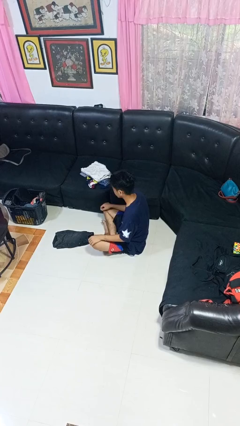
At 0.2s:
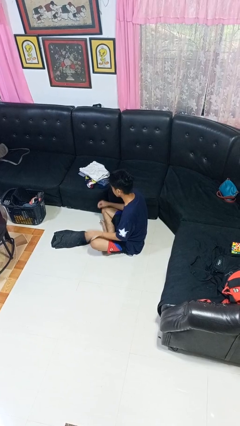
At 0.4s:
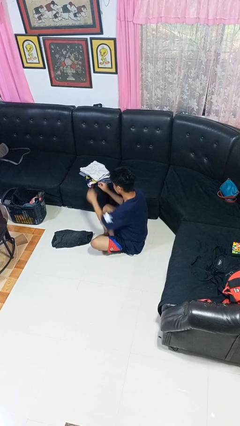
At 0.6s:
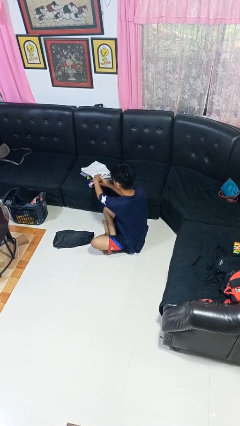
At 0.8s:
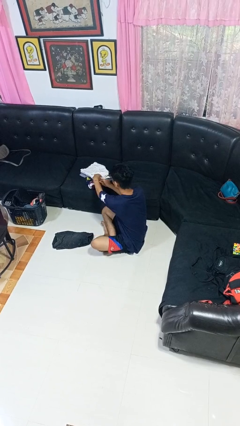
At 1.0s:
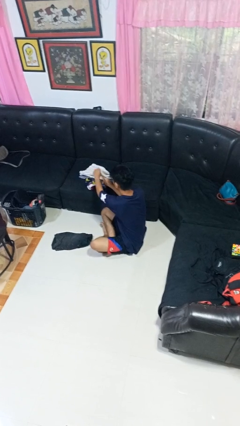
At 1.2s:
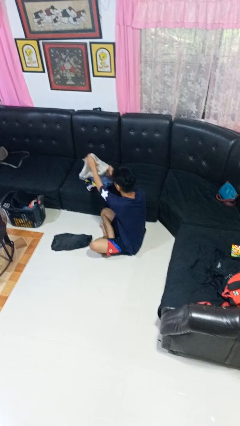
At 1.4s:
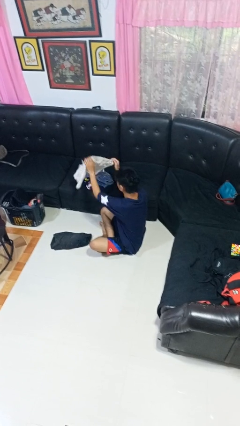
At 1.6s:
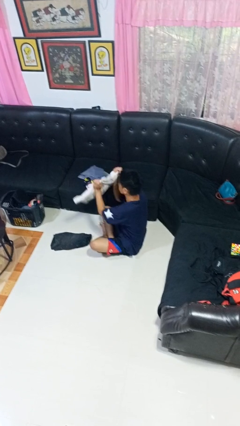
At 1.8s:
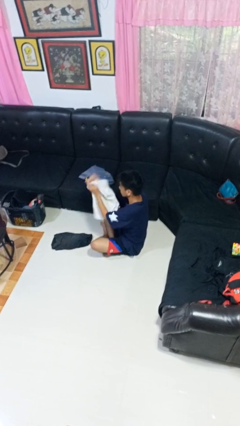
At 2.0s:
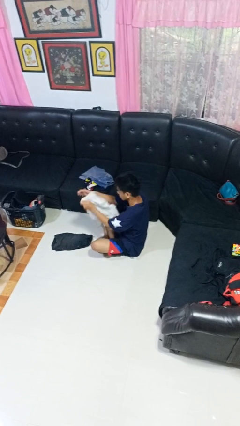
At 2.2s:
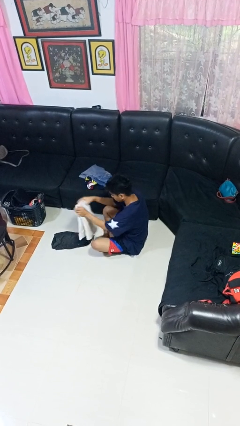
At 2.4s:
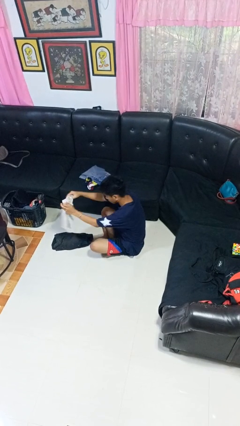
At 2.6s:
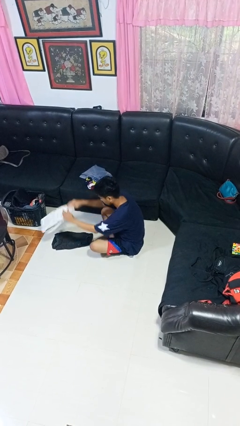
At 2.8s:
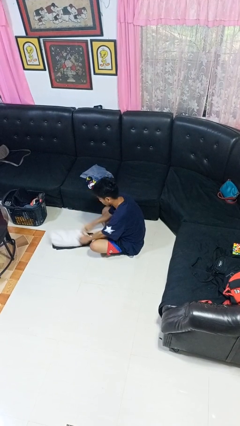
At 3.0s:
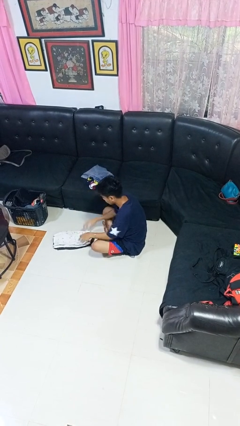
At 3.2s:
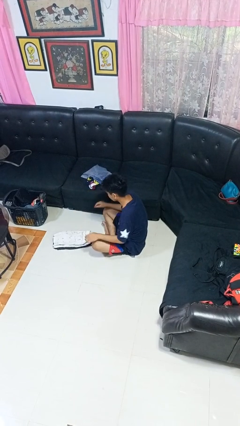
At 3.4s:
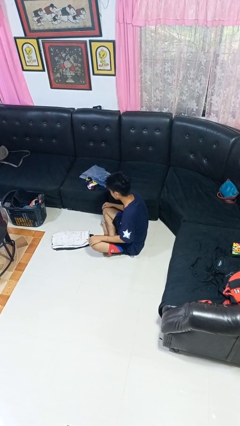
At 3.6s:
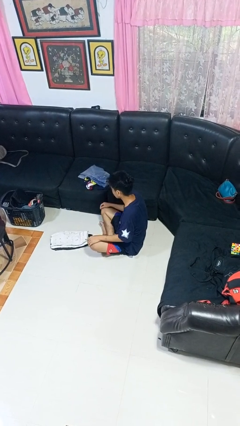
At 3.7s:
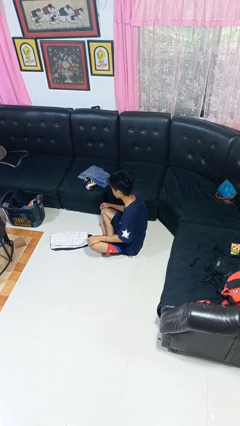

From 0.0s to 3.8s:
person folds pants

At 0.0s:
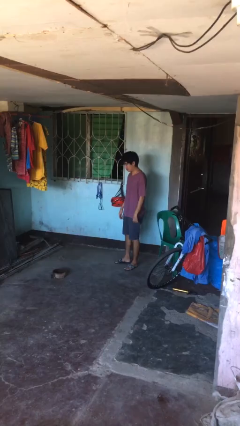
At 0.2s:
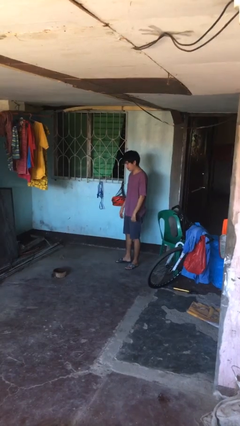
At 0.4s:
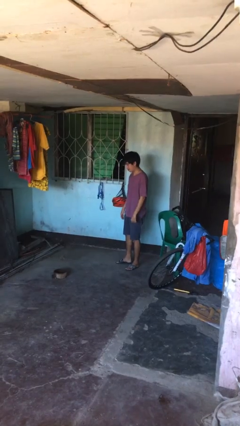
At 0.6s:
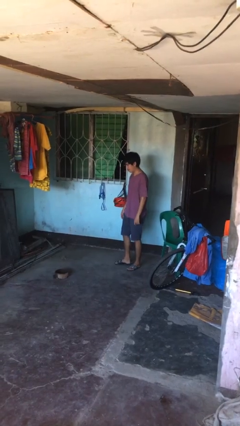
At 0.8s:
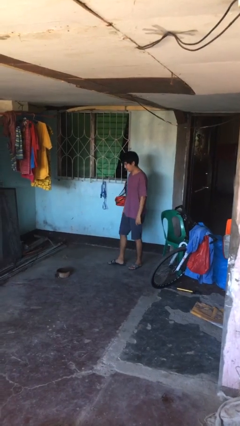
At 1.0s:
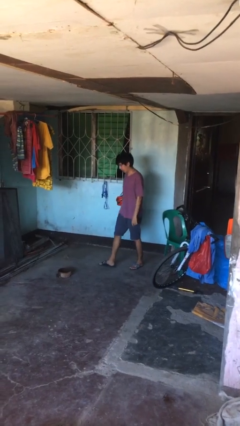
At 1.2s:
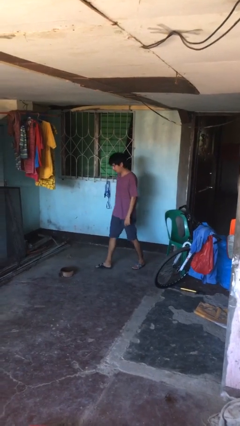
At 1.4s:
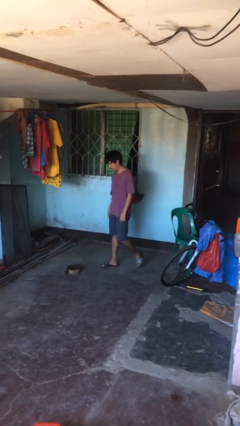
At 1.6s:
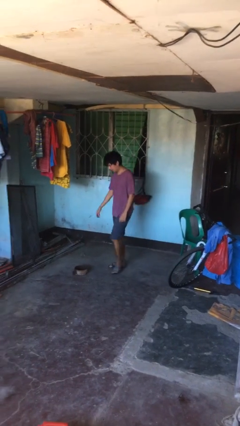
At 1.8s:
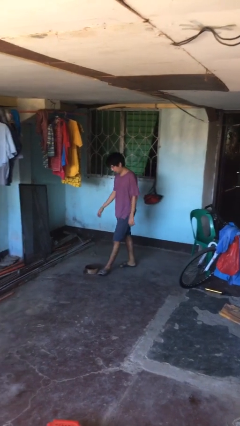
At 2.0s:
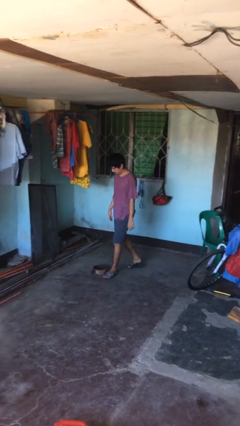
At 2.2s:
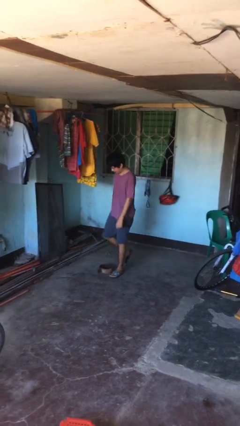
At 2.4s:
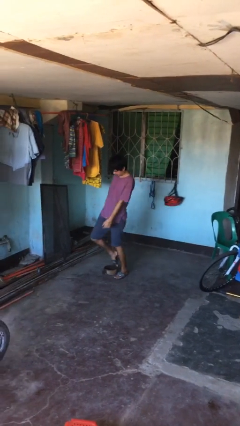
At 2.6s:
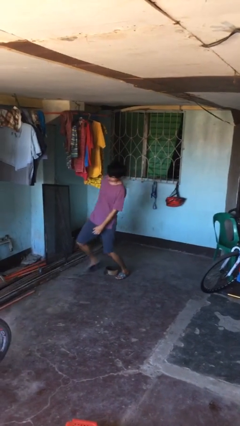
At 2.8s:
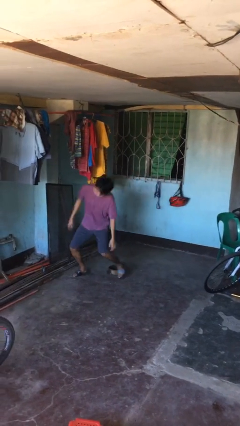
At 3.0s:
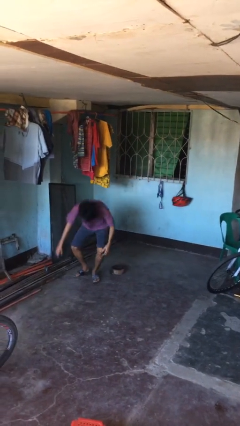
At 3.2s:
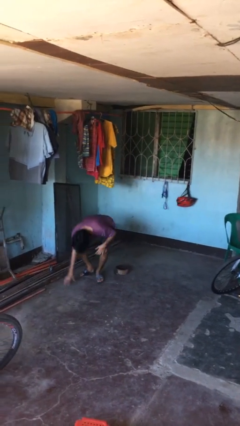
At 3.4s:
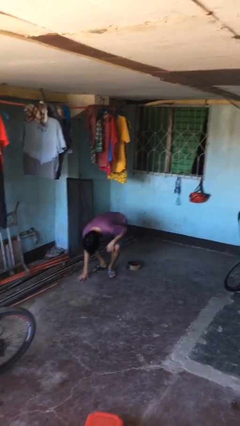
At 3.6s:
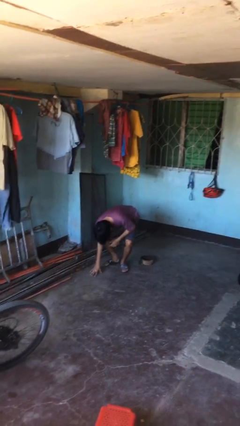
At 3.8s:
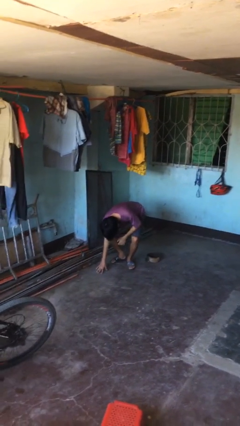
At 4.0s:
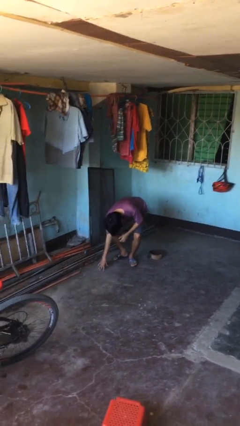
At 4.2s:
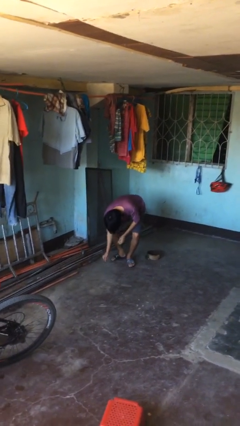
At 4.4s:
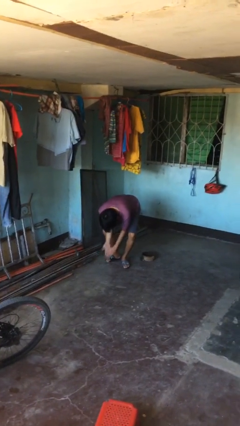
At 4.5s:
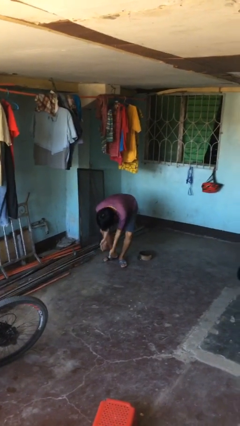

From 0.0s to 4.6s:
person trips on object on floor

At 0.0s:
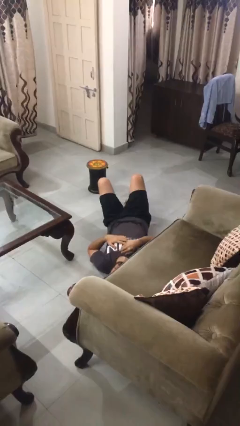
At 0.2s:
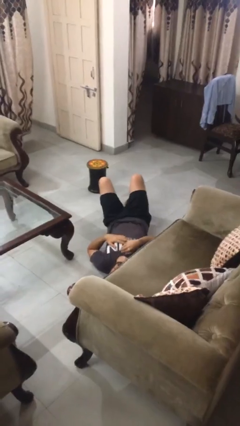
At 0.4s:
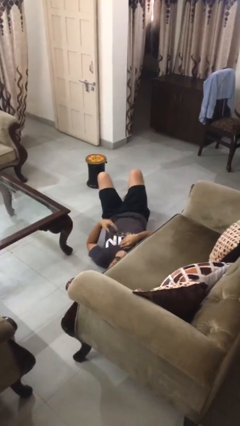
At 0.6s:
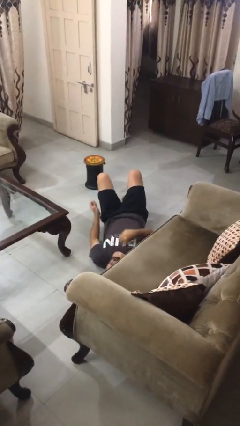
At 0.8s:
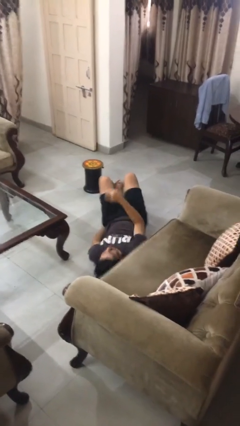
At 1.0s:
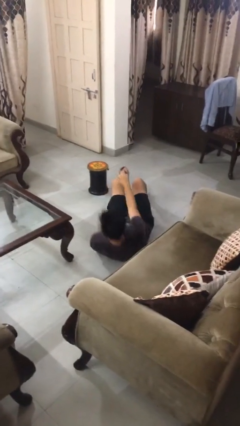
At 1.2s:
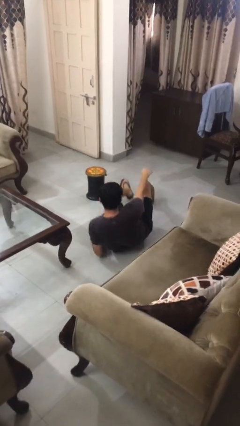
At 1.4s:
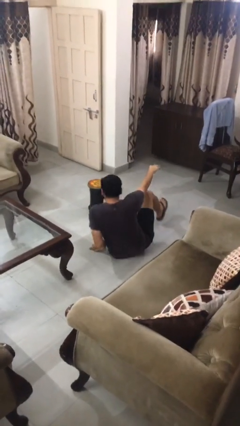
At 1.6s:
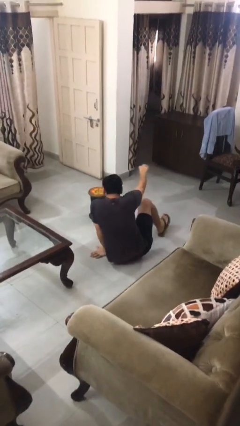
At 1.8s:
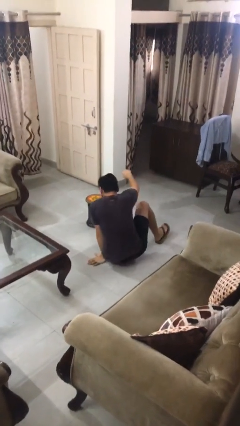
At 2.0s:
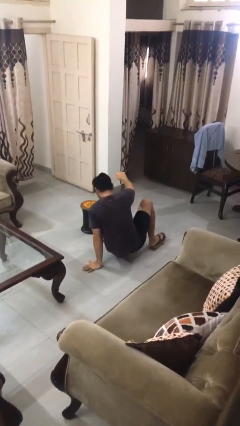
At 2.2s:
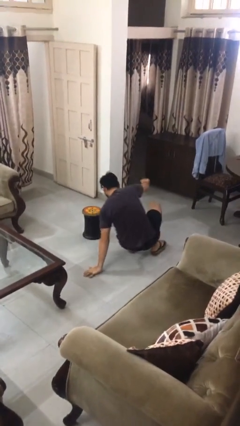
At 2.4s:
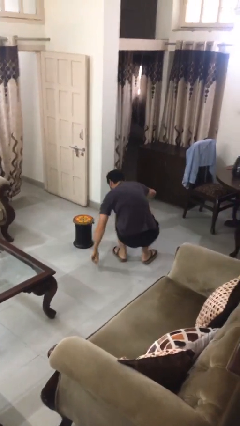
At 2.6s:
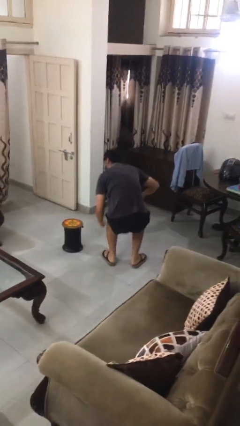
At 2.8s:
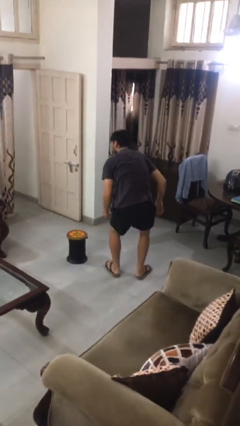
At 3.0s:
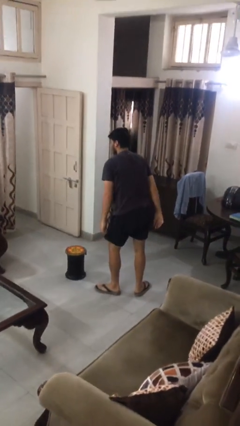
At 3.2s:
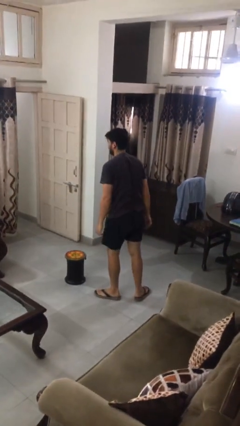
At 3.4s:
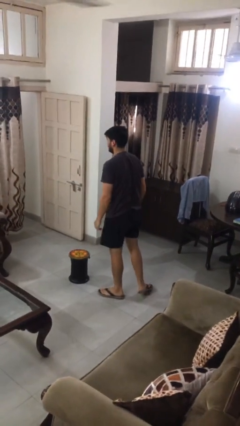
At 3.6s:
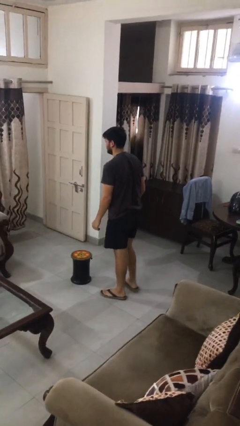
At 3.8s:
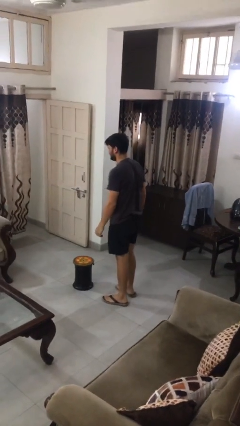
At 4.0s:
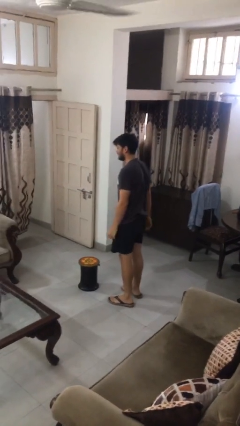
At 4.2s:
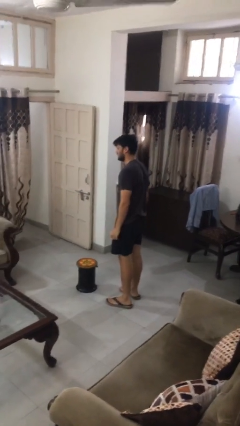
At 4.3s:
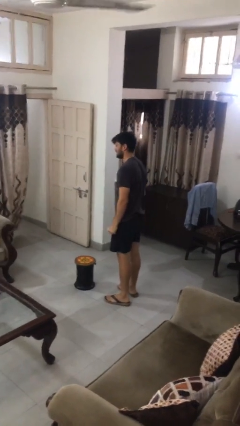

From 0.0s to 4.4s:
person stands up from floor

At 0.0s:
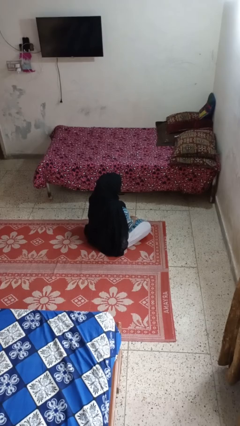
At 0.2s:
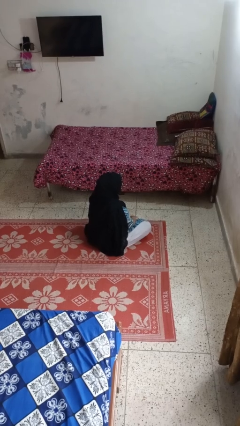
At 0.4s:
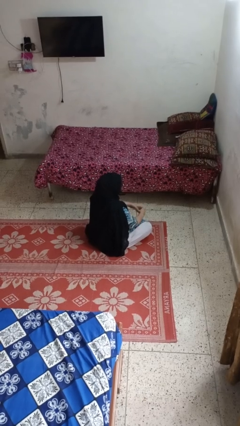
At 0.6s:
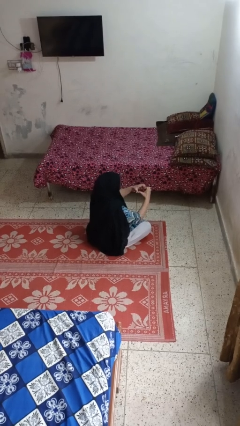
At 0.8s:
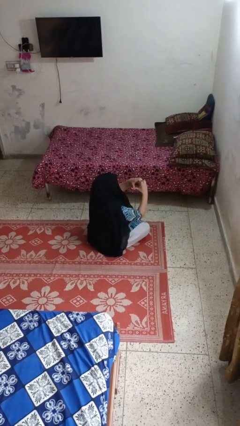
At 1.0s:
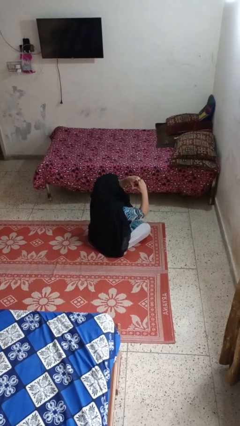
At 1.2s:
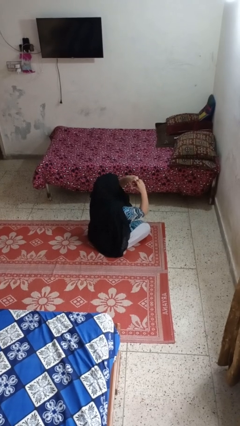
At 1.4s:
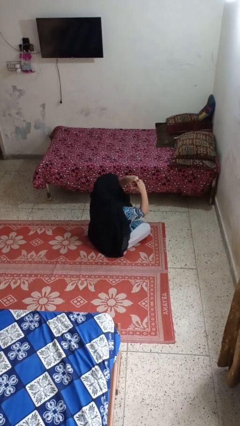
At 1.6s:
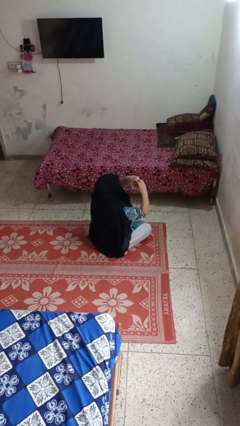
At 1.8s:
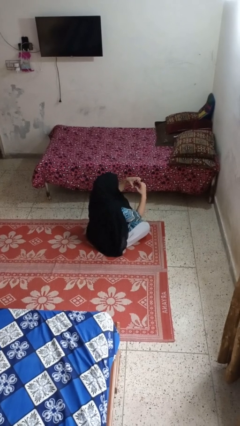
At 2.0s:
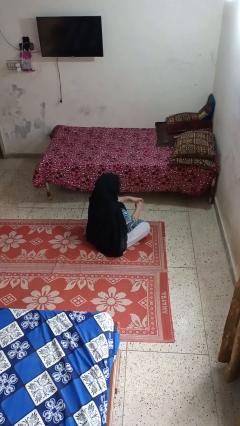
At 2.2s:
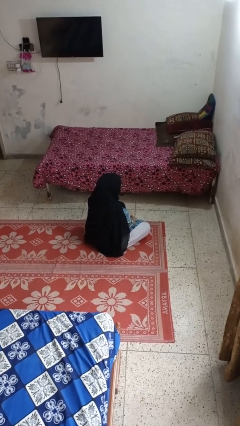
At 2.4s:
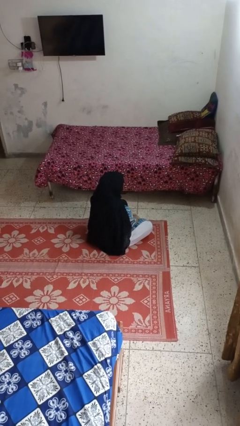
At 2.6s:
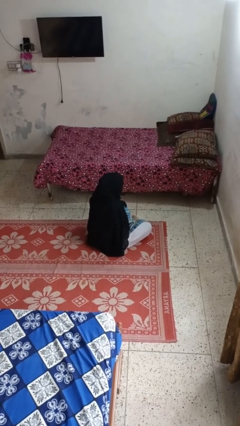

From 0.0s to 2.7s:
person gestures heart

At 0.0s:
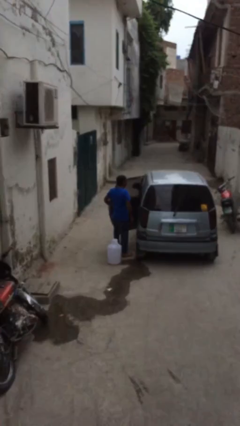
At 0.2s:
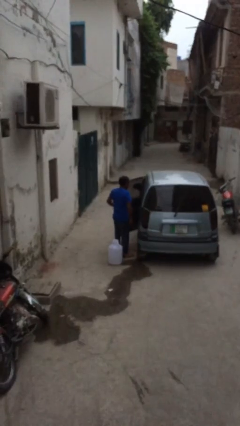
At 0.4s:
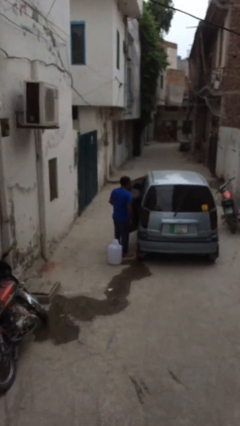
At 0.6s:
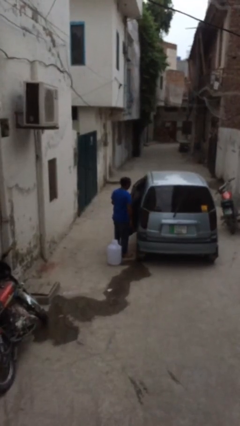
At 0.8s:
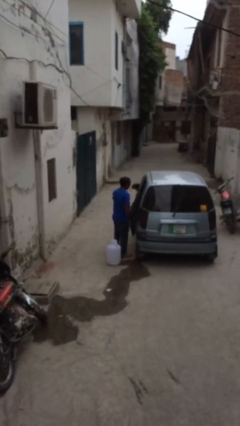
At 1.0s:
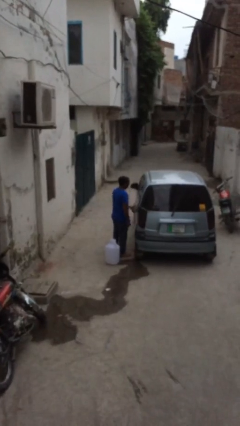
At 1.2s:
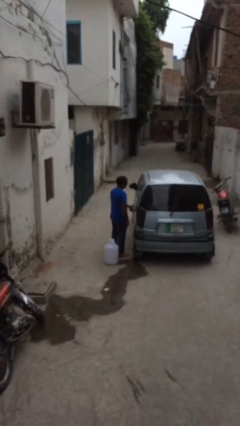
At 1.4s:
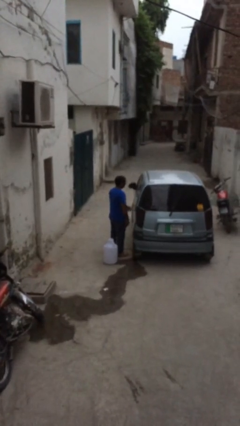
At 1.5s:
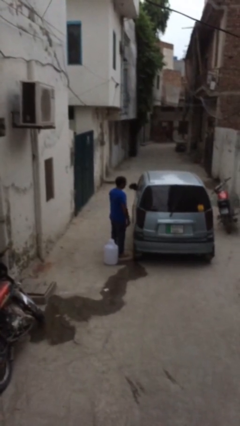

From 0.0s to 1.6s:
person closes car door

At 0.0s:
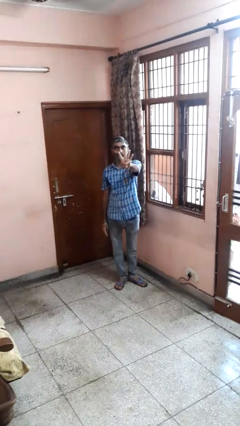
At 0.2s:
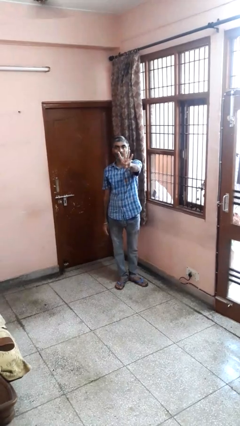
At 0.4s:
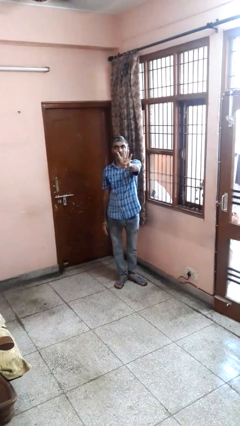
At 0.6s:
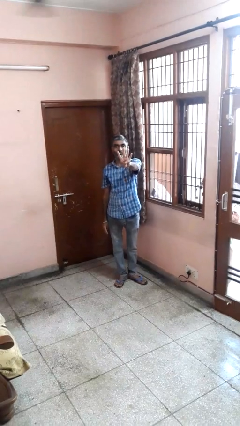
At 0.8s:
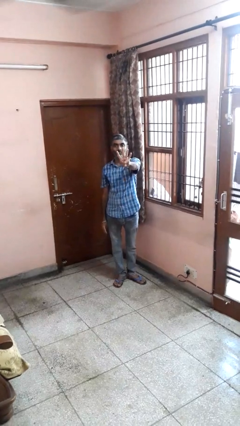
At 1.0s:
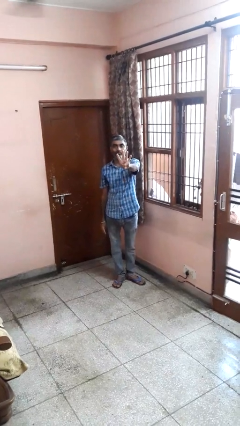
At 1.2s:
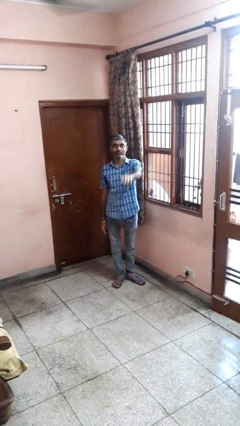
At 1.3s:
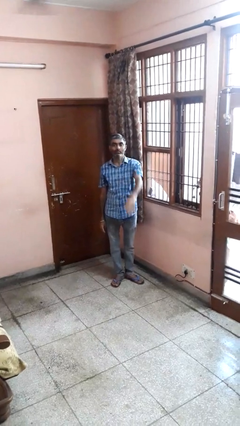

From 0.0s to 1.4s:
person gestures number four
